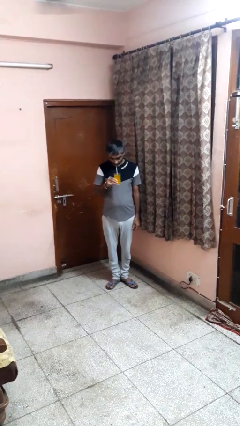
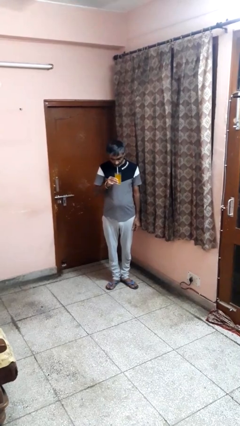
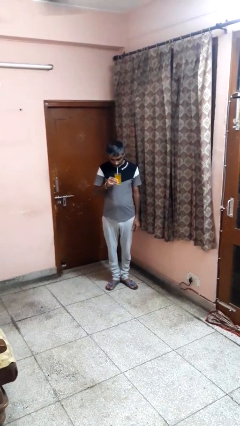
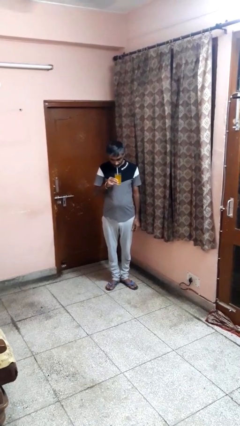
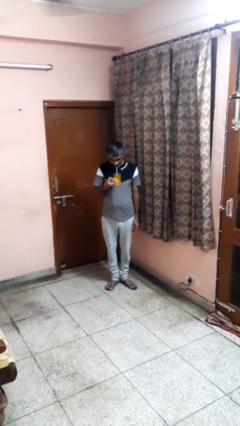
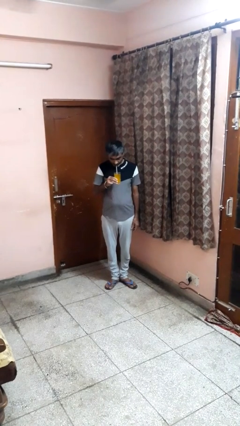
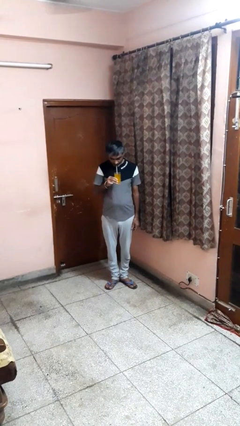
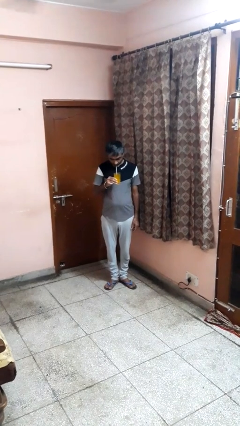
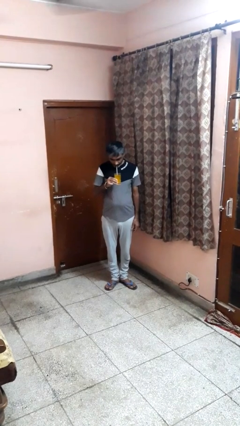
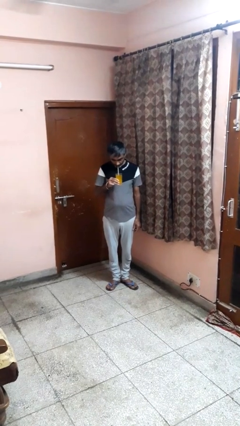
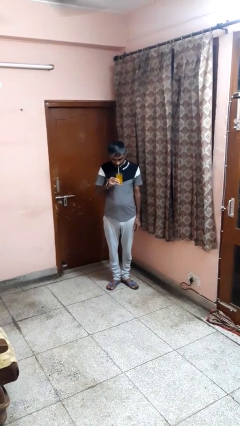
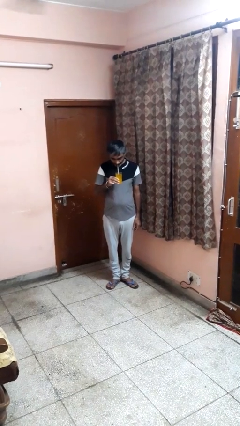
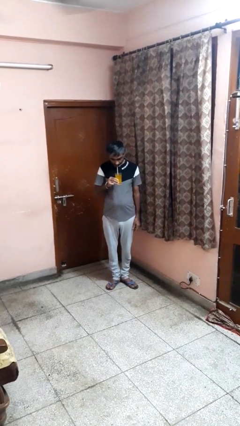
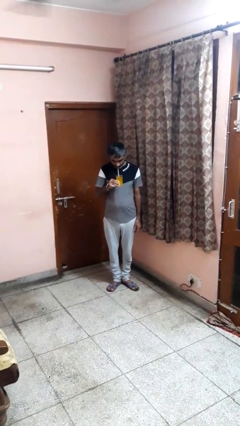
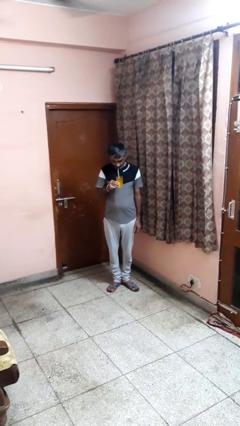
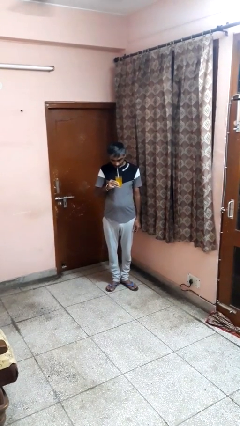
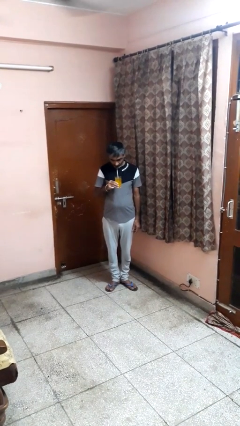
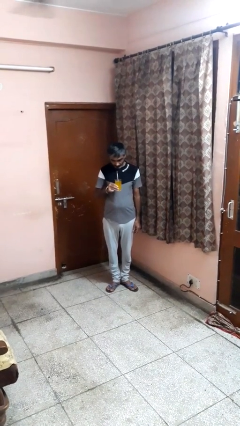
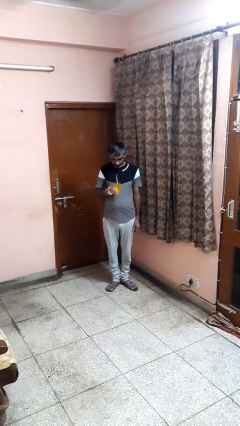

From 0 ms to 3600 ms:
person drinks from straw

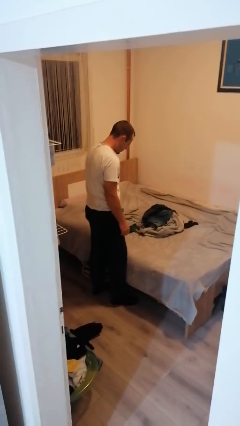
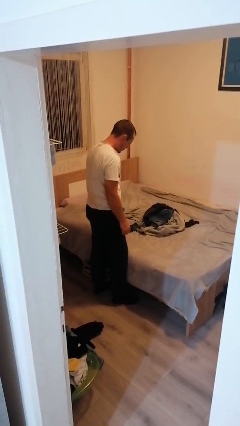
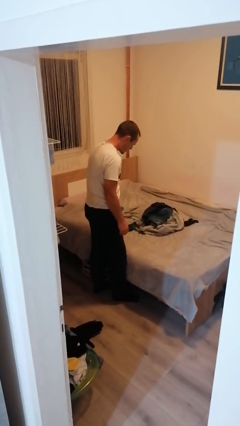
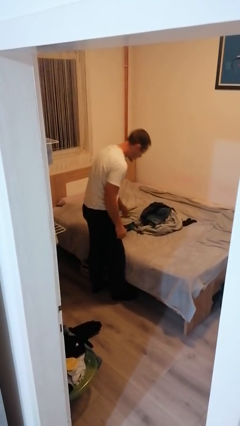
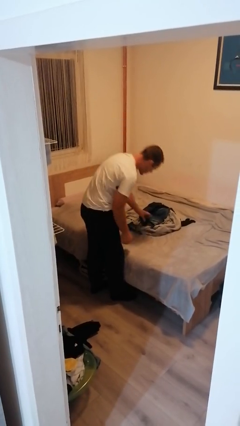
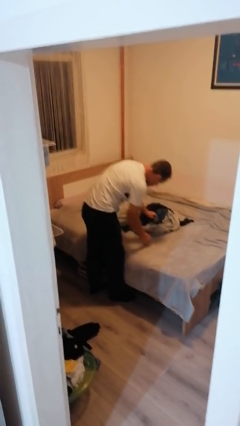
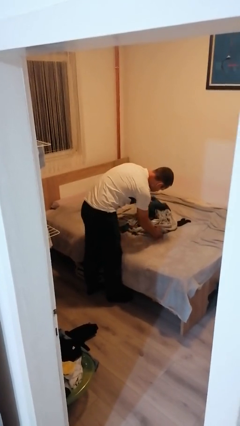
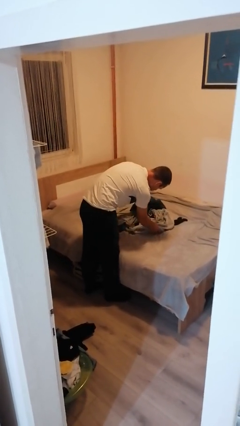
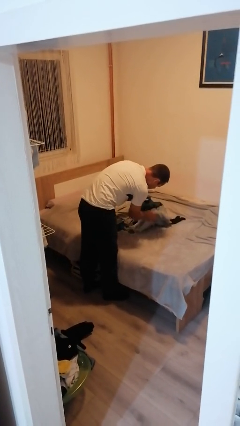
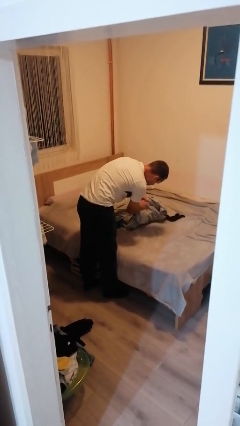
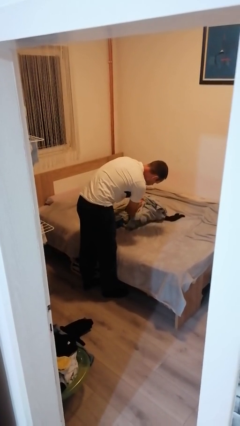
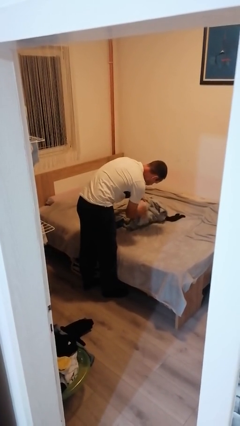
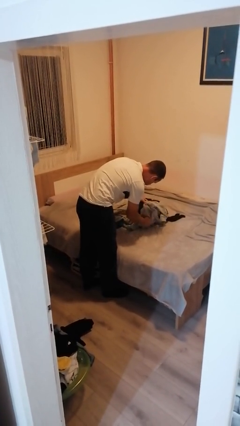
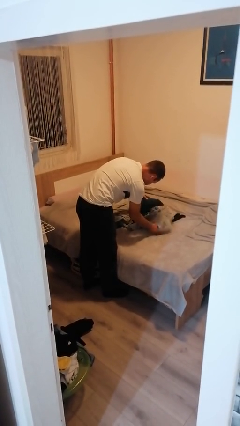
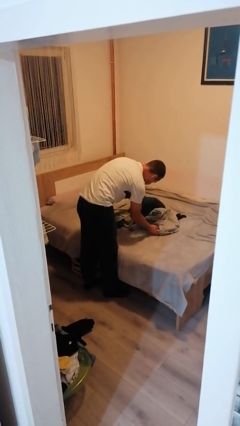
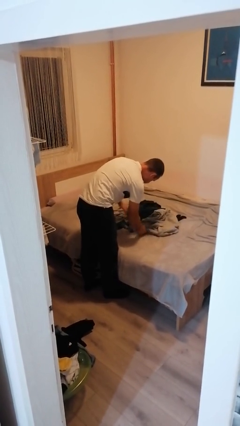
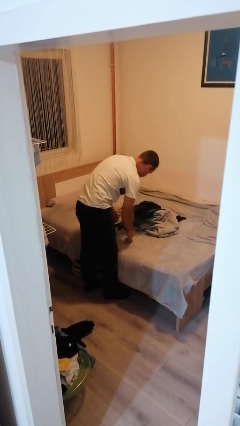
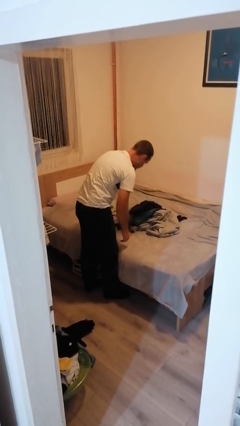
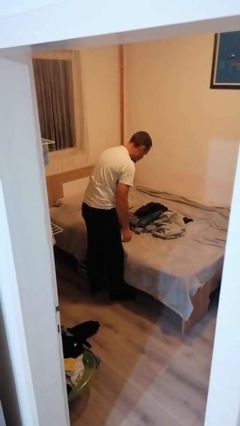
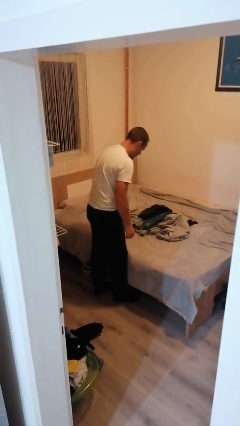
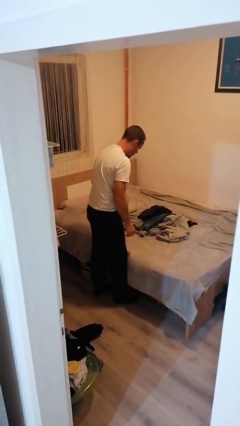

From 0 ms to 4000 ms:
person searches under bed

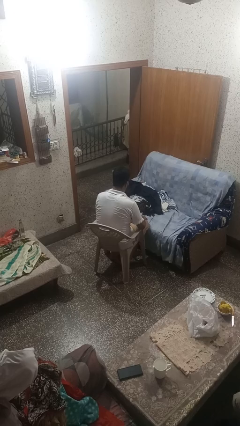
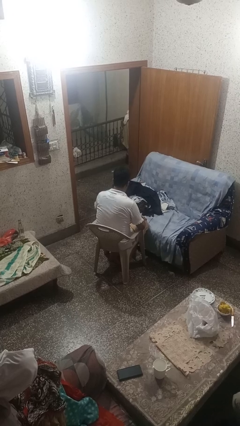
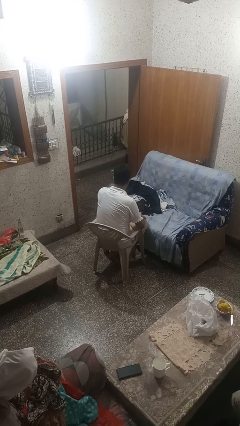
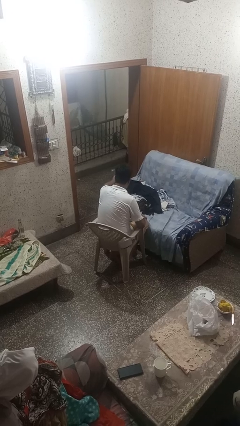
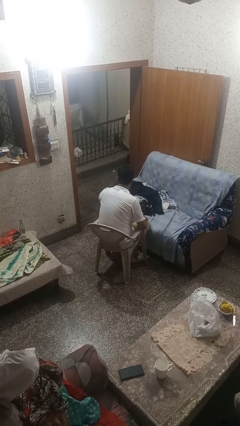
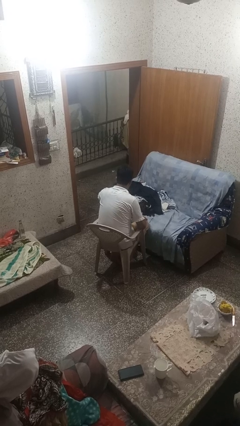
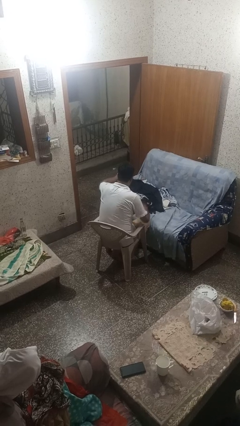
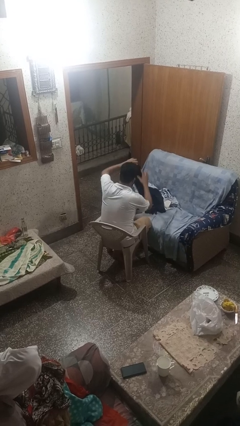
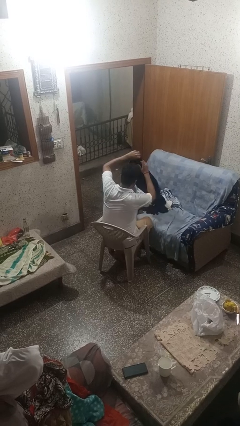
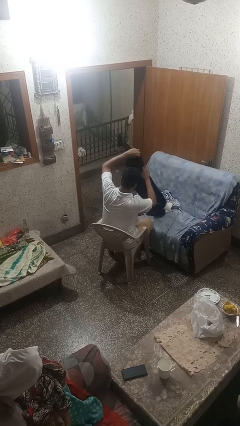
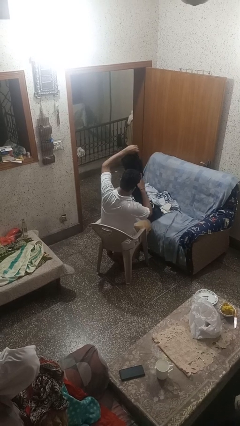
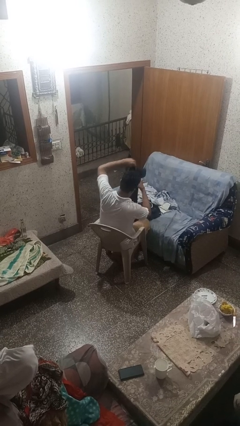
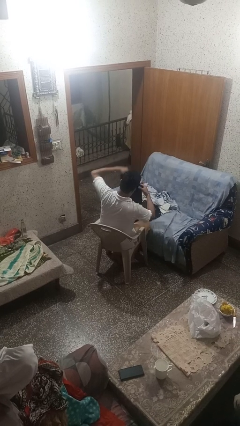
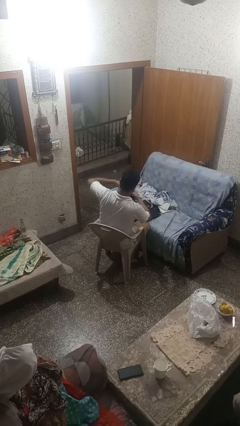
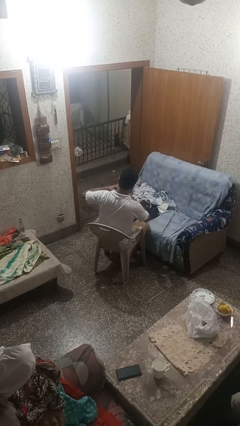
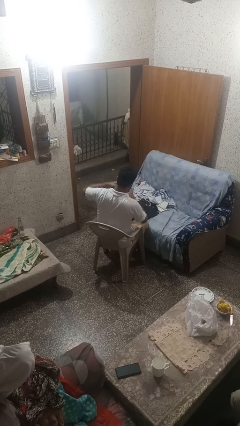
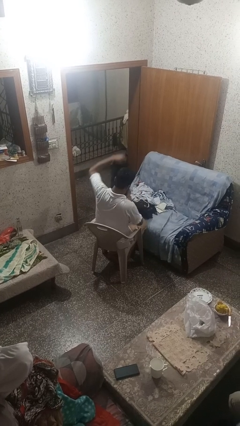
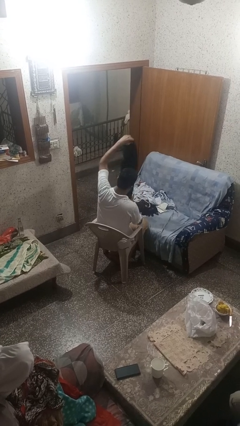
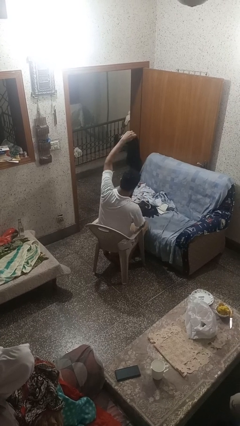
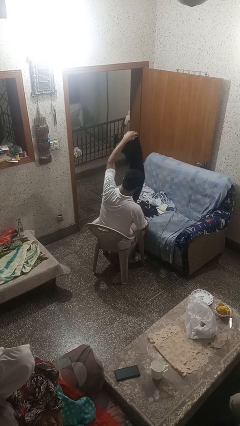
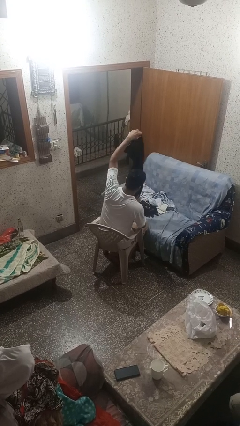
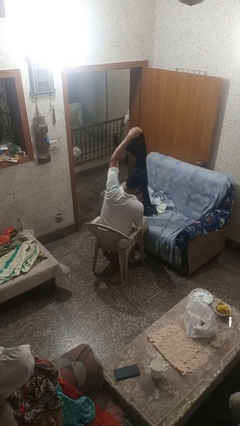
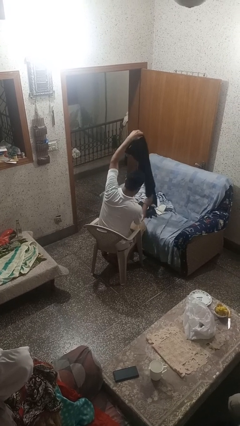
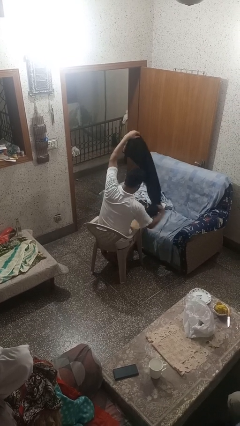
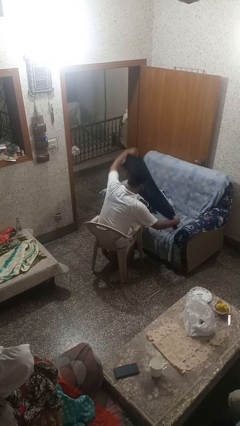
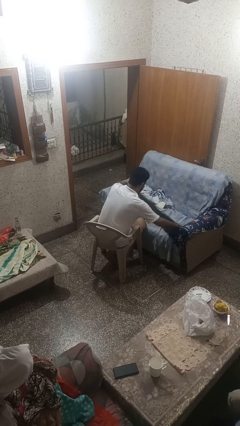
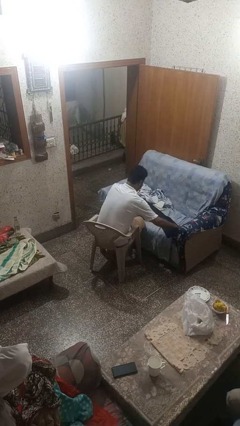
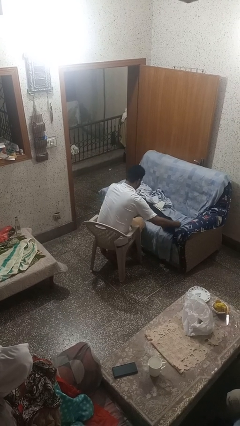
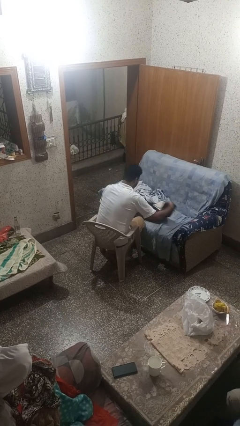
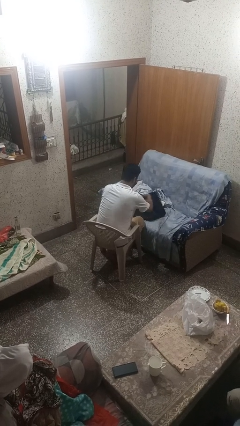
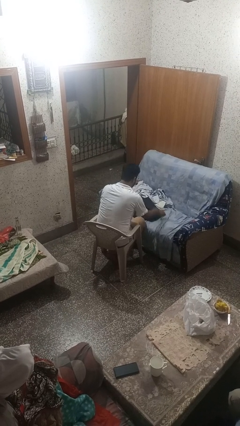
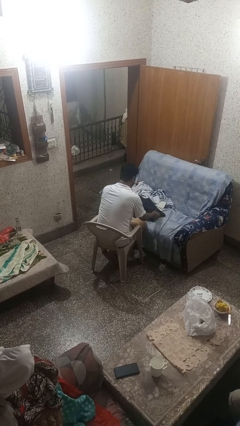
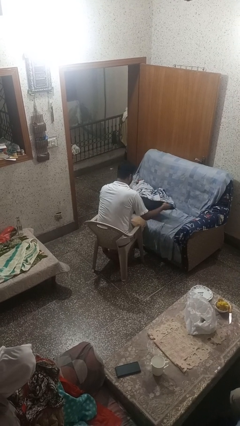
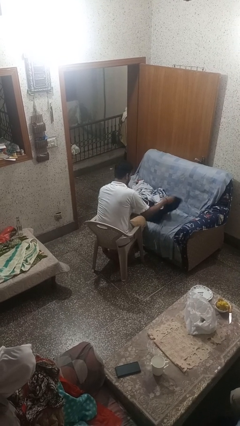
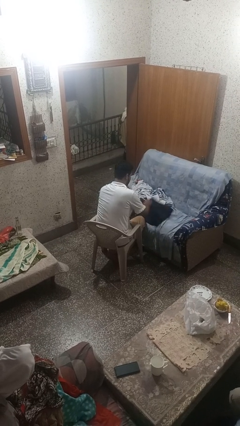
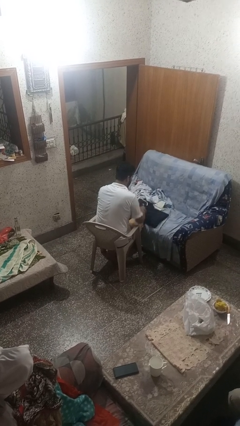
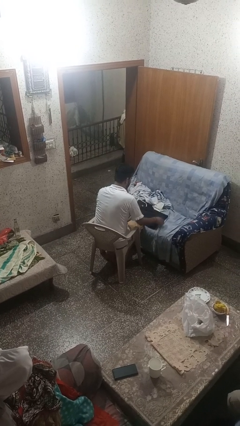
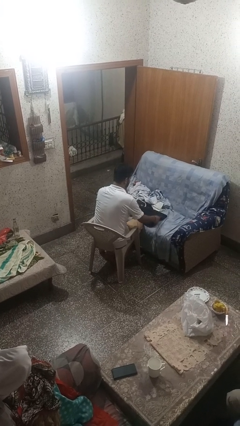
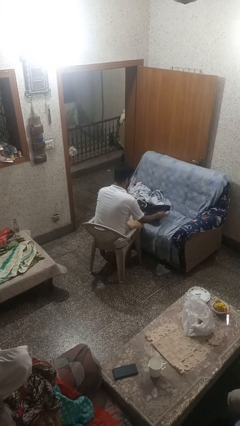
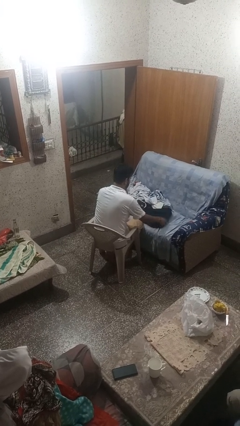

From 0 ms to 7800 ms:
person folds pants

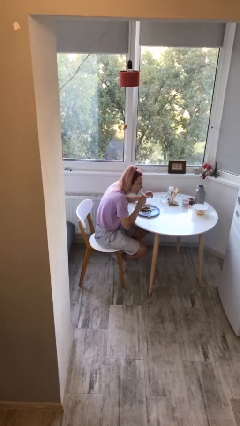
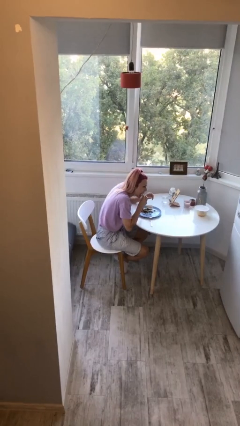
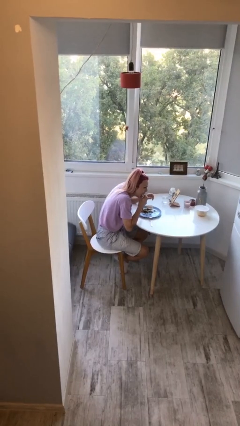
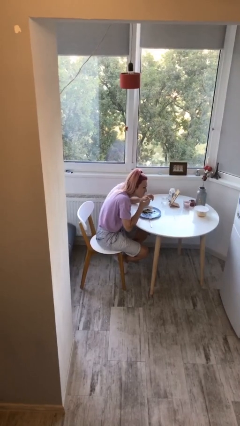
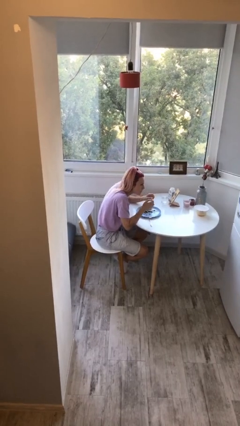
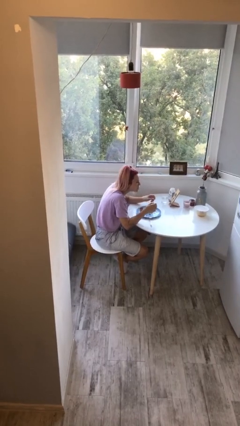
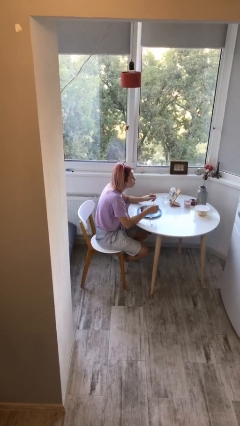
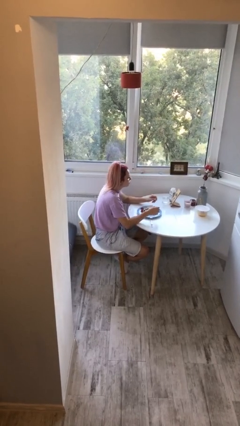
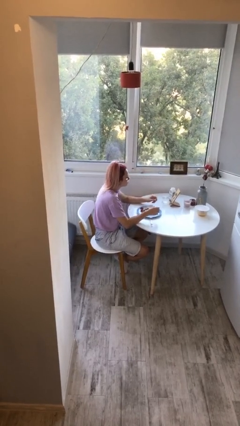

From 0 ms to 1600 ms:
person eats with hands

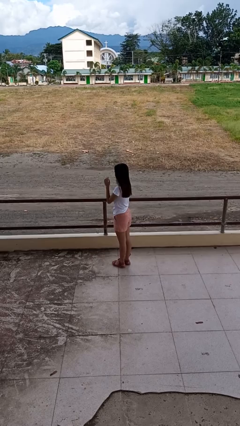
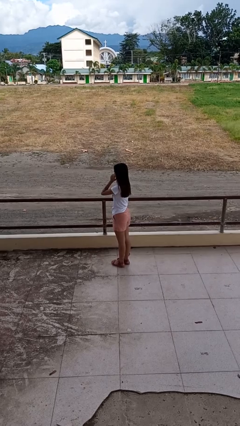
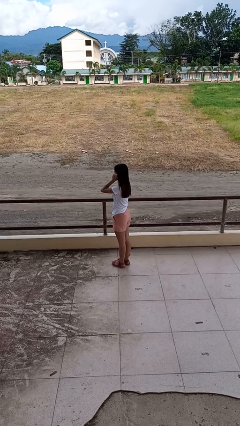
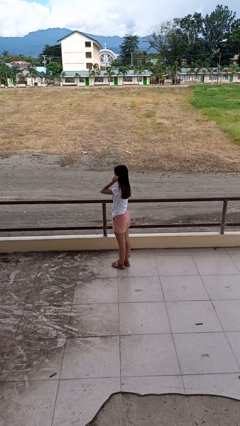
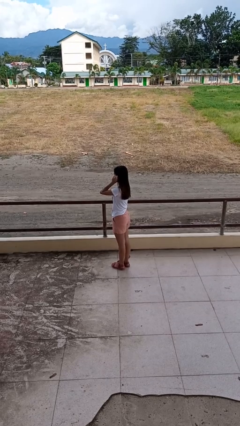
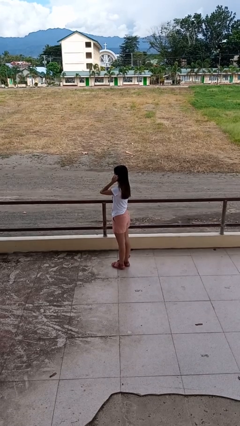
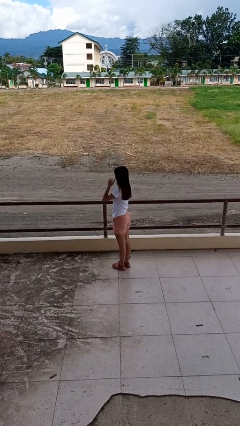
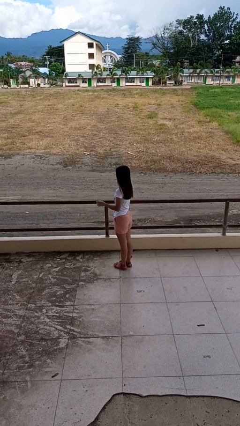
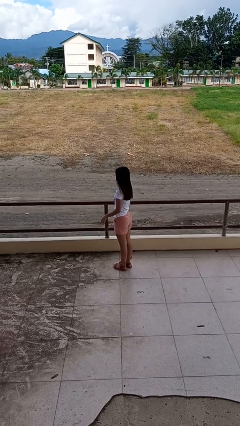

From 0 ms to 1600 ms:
person touches earlobe
